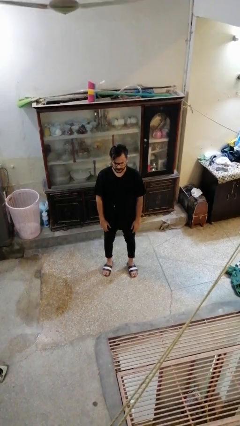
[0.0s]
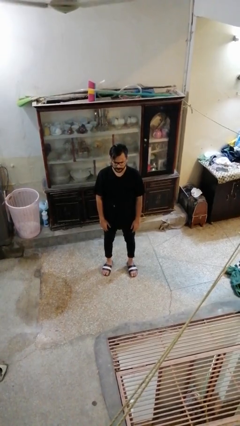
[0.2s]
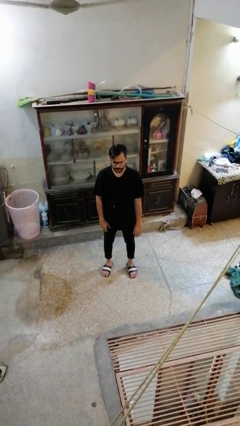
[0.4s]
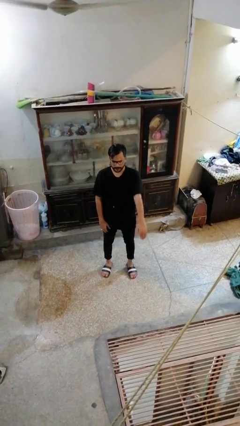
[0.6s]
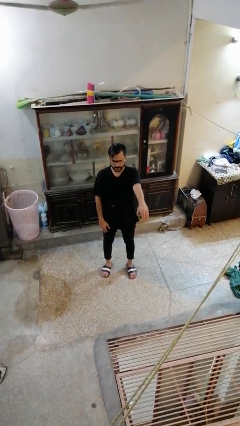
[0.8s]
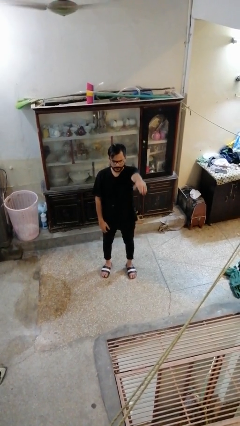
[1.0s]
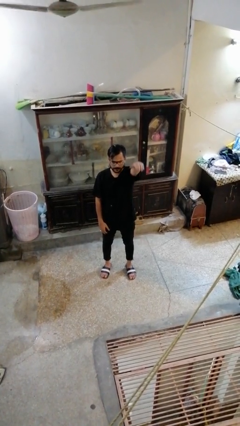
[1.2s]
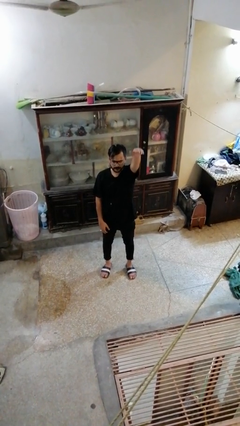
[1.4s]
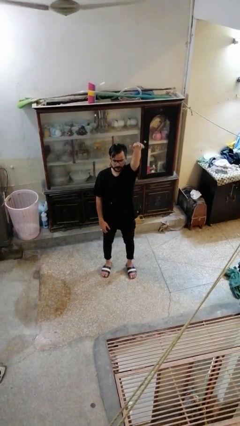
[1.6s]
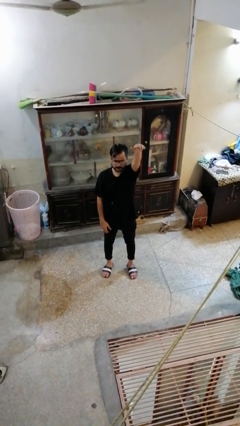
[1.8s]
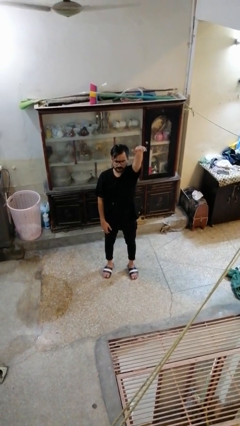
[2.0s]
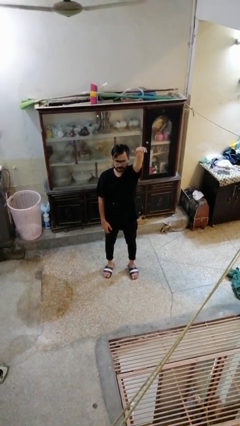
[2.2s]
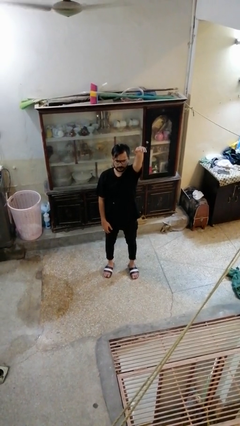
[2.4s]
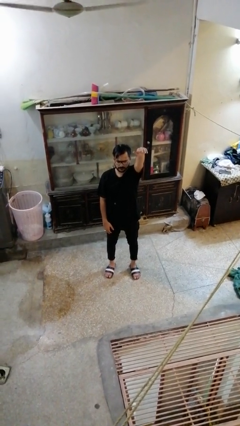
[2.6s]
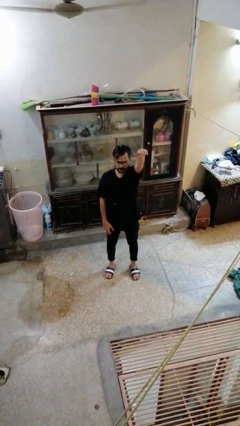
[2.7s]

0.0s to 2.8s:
person gestures swipe up

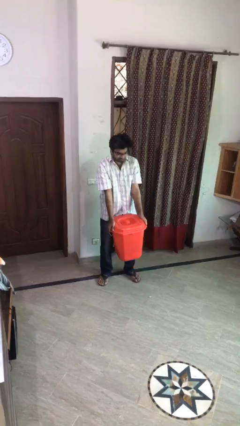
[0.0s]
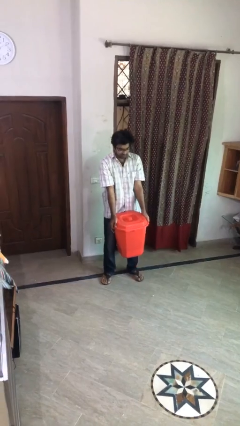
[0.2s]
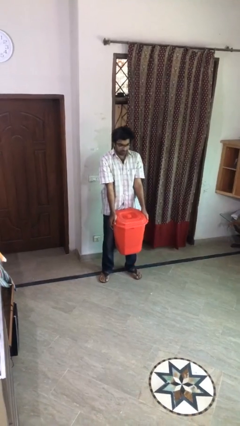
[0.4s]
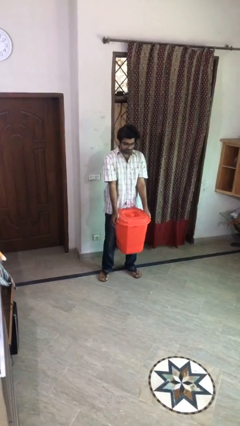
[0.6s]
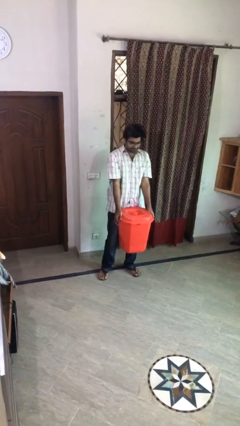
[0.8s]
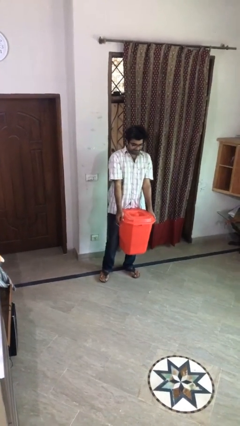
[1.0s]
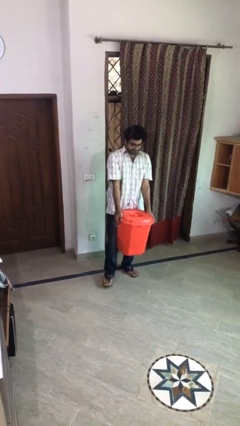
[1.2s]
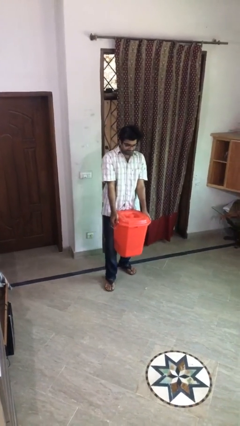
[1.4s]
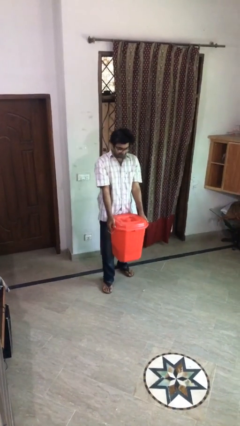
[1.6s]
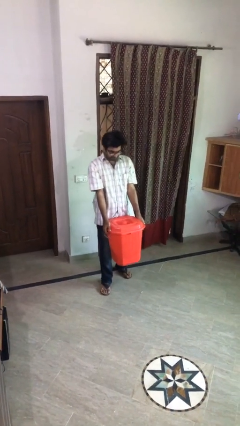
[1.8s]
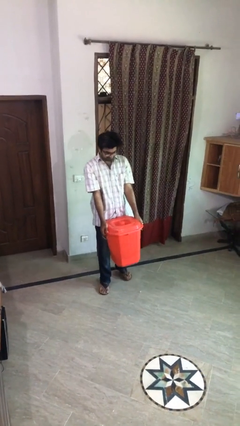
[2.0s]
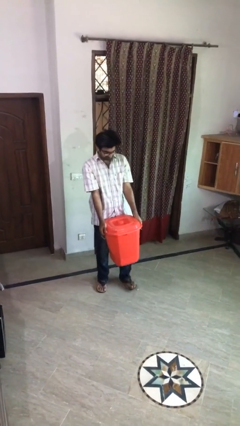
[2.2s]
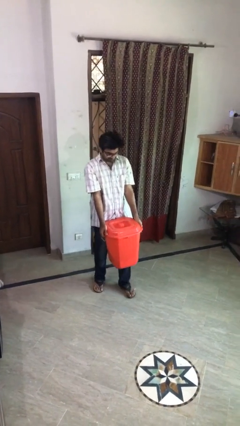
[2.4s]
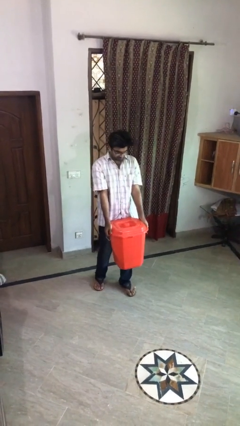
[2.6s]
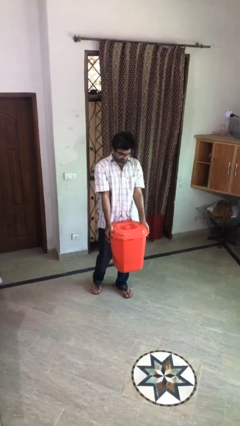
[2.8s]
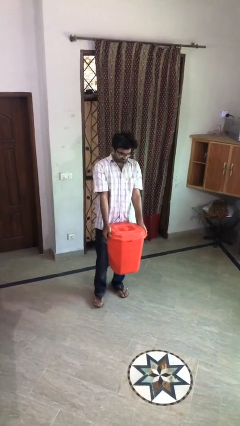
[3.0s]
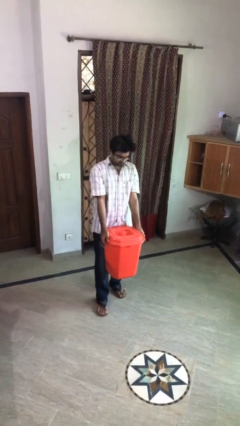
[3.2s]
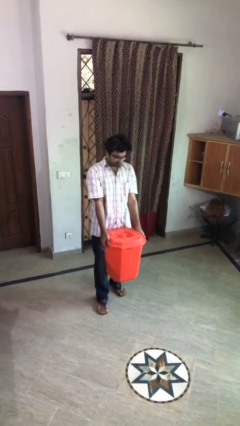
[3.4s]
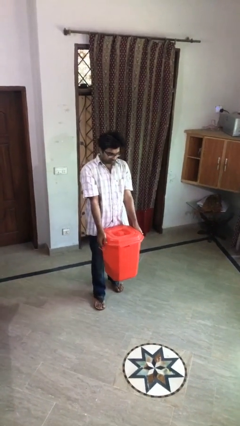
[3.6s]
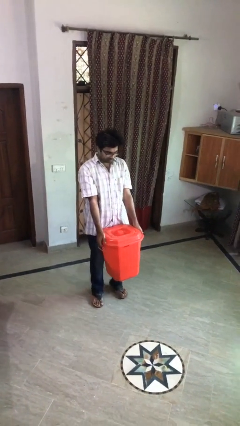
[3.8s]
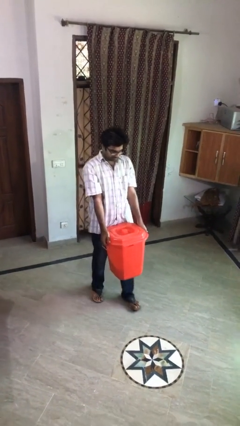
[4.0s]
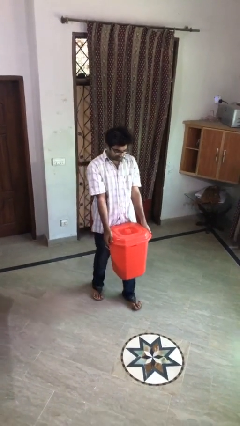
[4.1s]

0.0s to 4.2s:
person carries heavy object

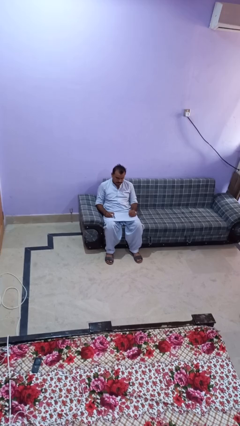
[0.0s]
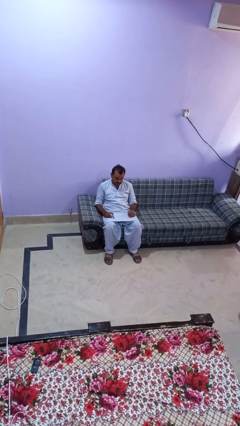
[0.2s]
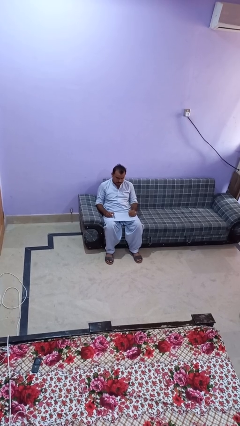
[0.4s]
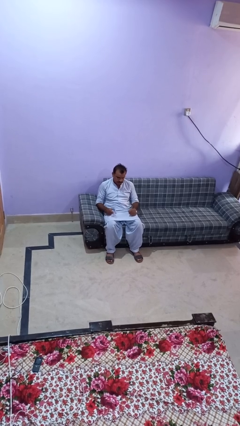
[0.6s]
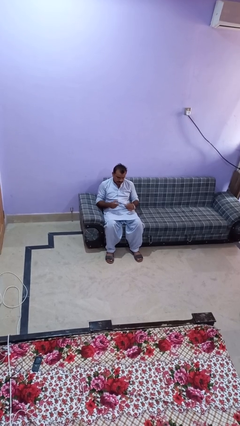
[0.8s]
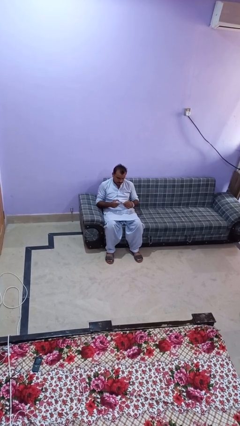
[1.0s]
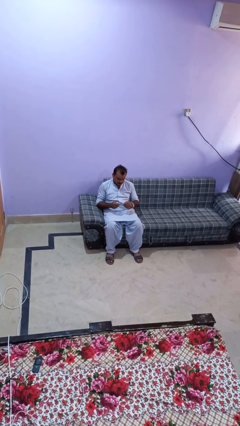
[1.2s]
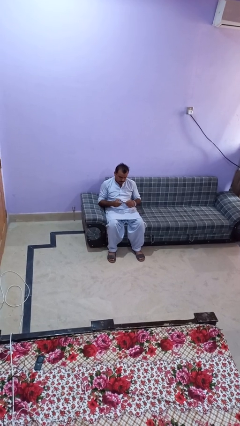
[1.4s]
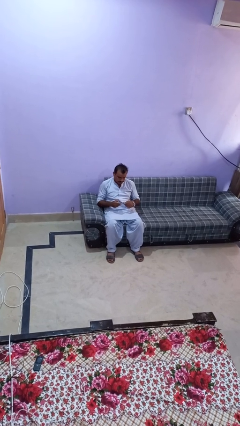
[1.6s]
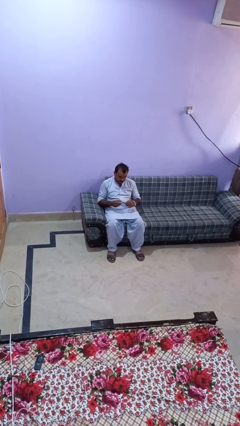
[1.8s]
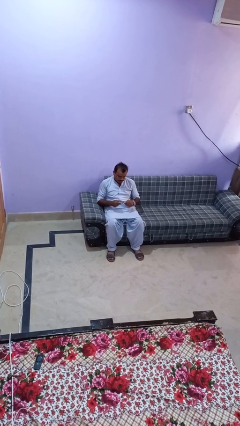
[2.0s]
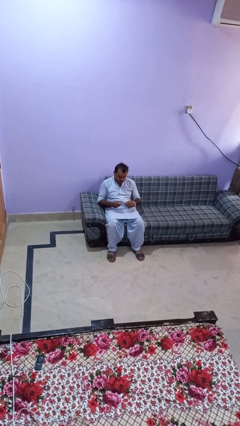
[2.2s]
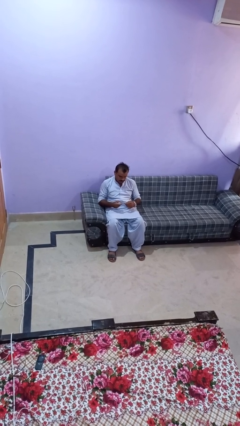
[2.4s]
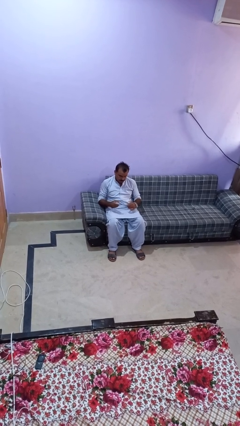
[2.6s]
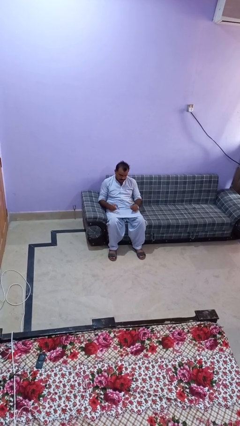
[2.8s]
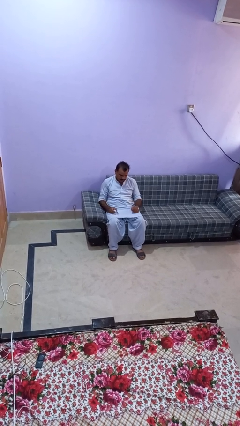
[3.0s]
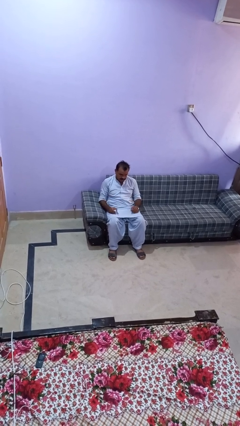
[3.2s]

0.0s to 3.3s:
person clips fingernails

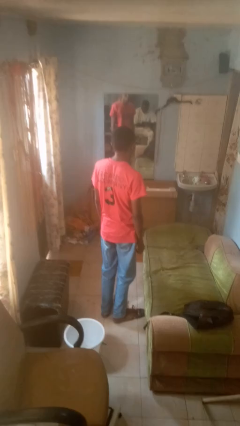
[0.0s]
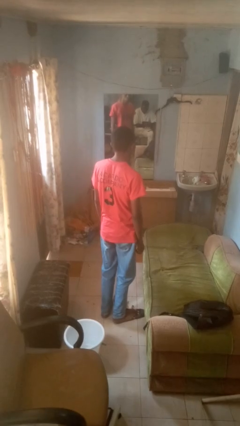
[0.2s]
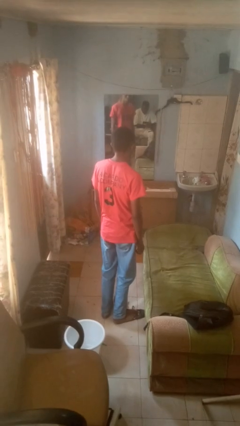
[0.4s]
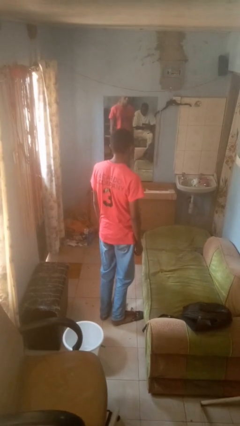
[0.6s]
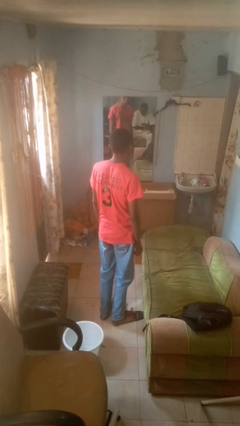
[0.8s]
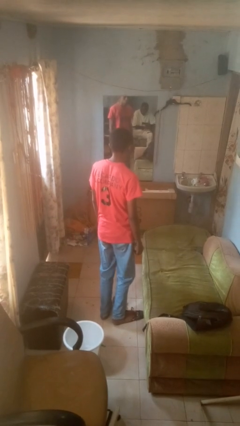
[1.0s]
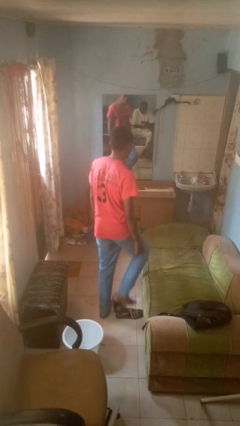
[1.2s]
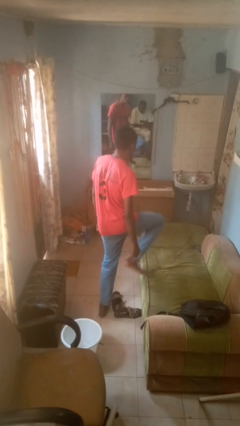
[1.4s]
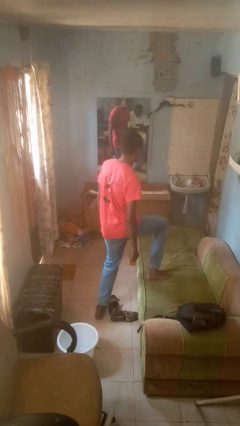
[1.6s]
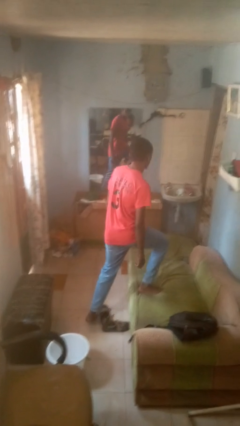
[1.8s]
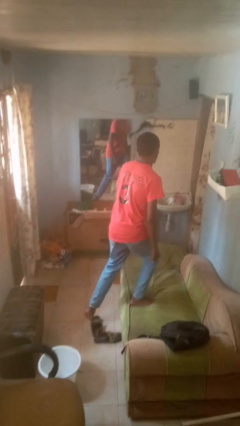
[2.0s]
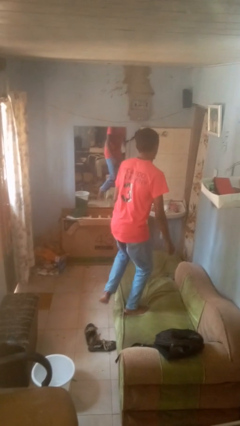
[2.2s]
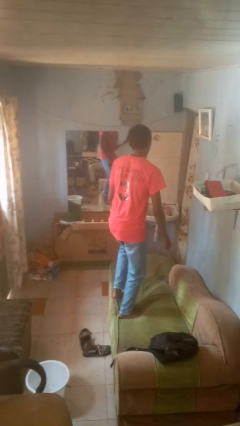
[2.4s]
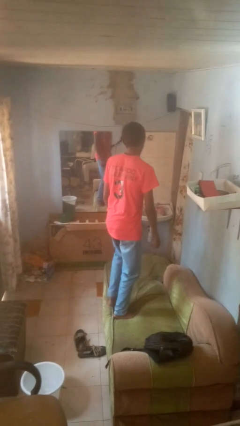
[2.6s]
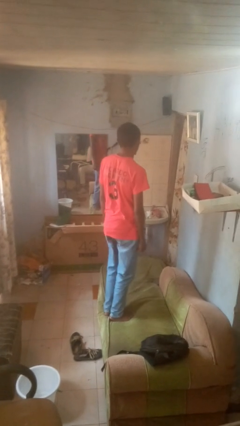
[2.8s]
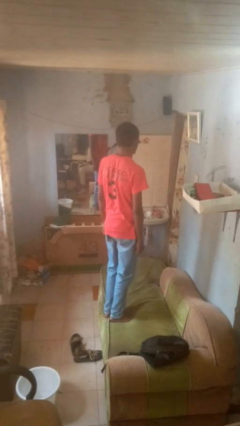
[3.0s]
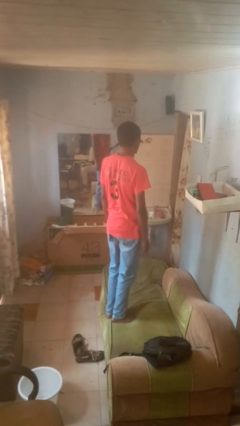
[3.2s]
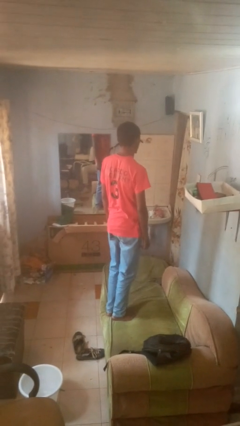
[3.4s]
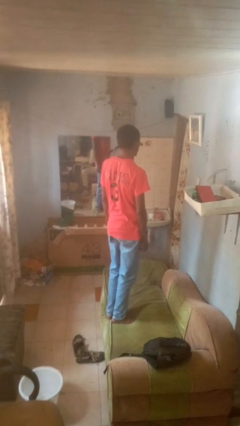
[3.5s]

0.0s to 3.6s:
person climbs on couch

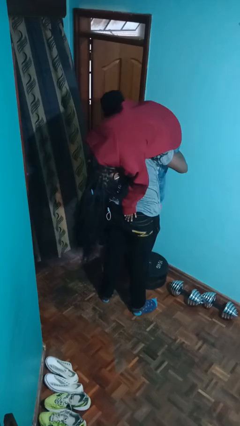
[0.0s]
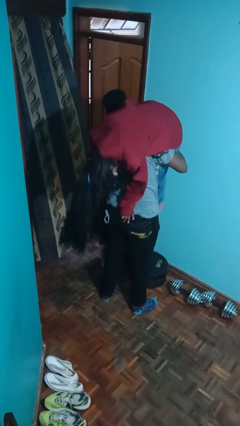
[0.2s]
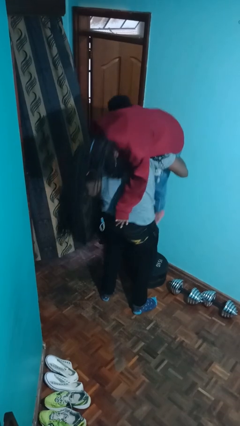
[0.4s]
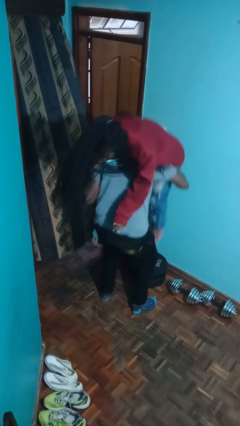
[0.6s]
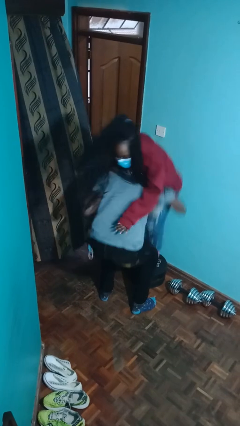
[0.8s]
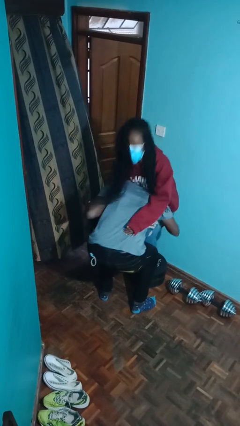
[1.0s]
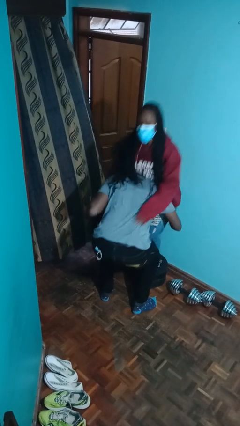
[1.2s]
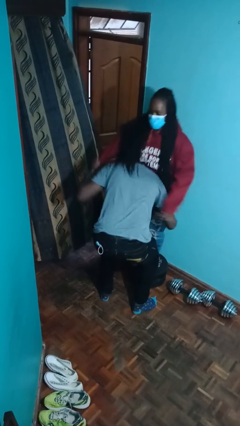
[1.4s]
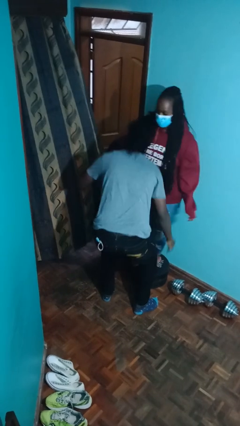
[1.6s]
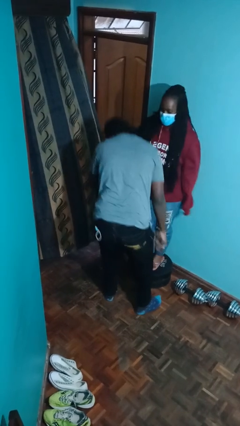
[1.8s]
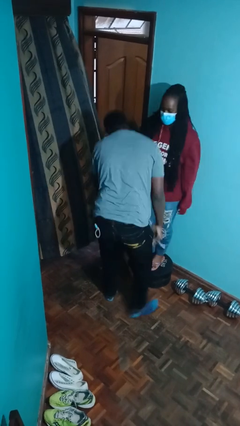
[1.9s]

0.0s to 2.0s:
person puts down person

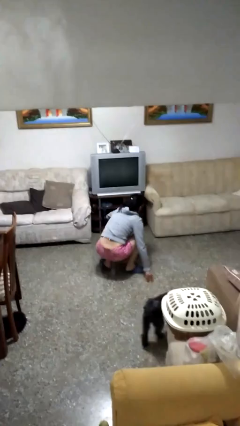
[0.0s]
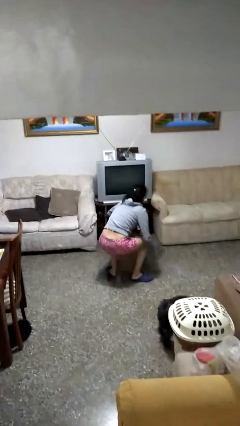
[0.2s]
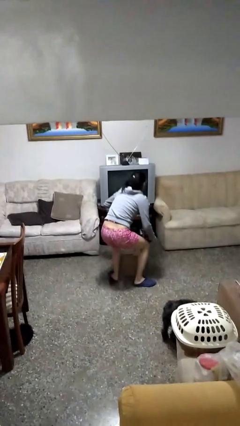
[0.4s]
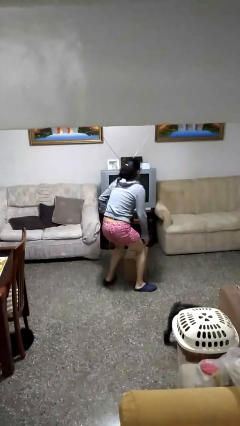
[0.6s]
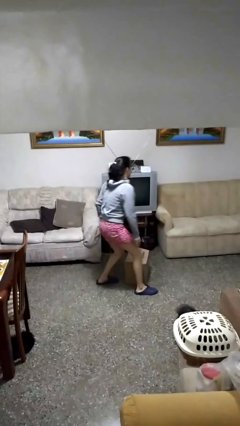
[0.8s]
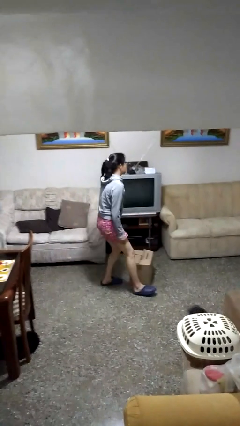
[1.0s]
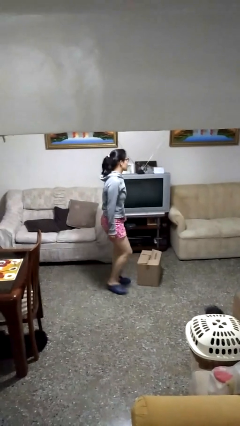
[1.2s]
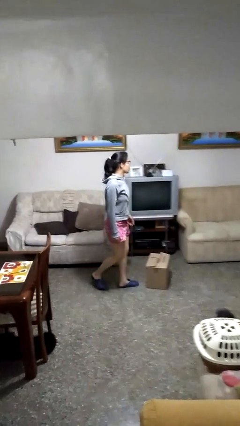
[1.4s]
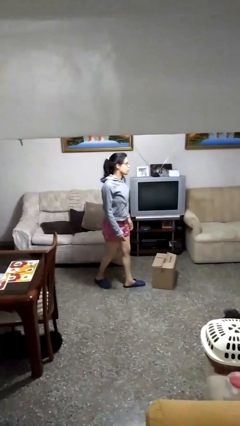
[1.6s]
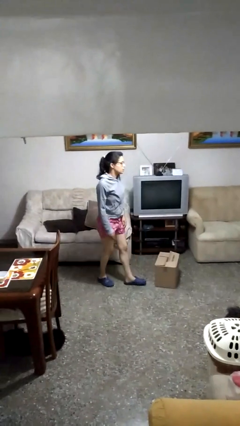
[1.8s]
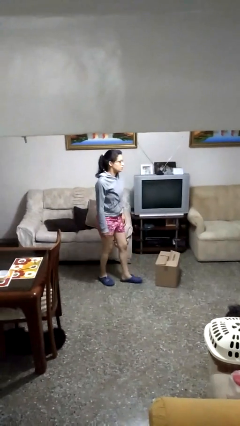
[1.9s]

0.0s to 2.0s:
person stands up from floor
